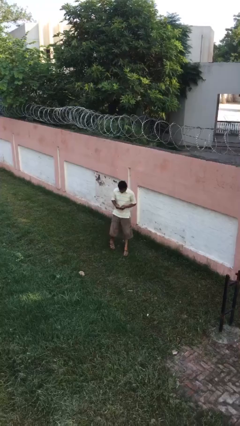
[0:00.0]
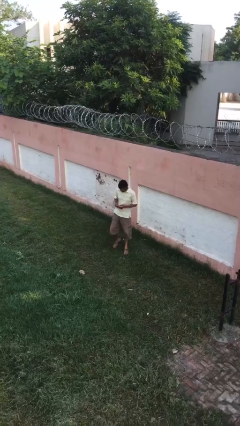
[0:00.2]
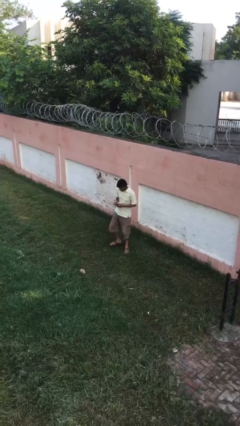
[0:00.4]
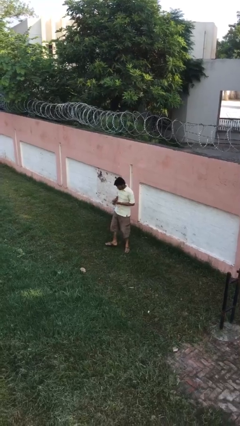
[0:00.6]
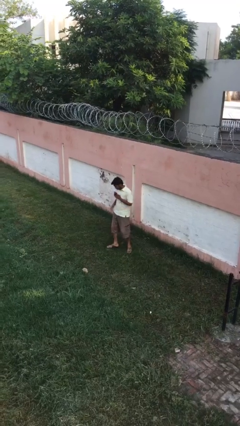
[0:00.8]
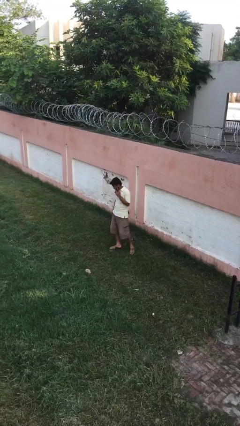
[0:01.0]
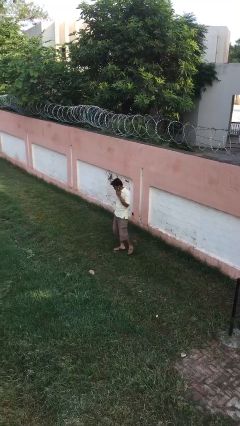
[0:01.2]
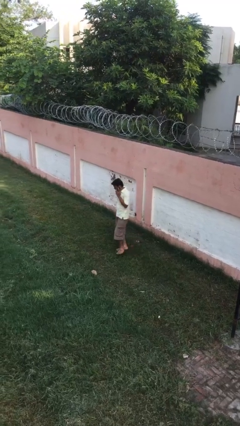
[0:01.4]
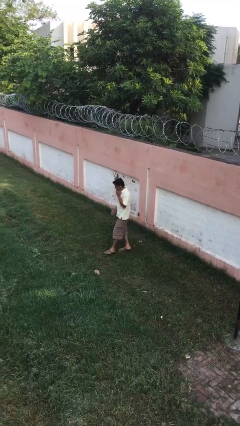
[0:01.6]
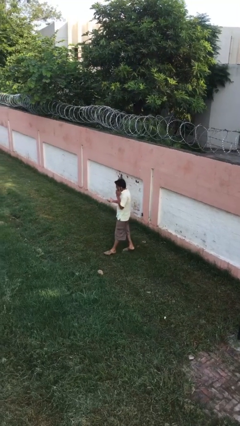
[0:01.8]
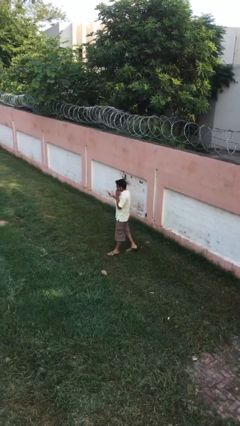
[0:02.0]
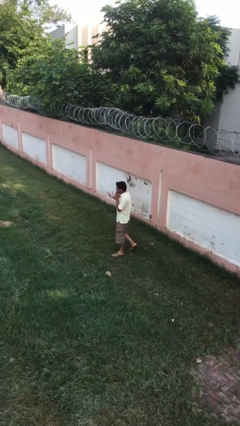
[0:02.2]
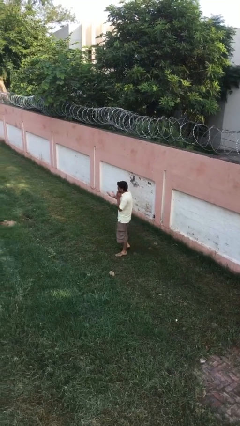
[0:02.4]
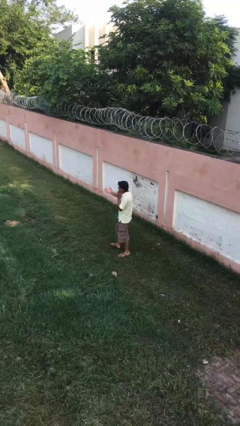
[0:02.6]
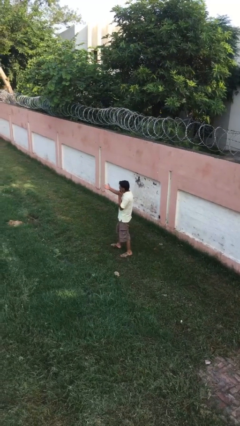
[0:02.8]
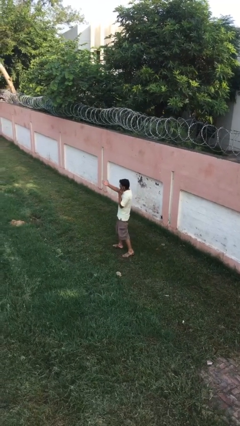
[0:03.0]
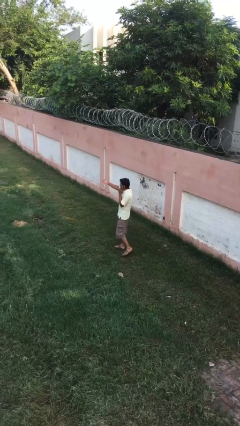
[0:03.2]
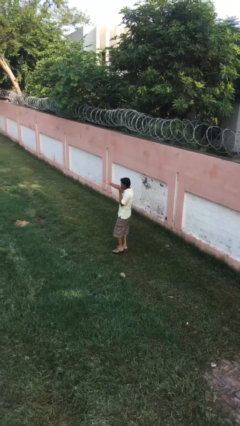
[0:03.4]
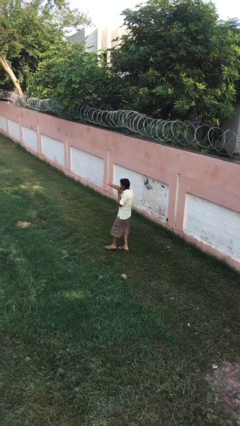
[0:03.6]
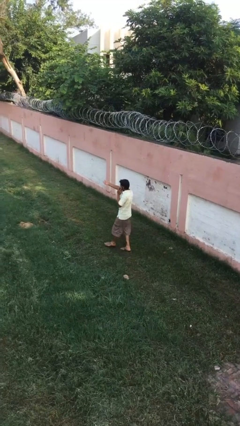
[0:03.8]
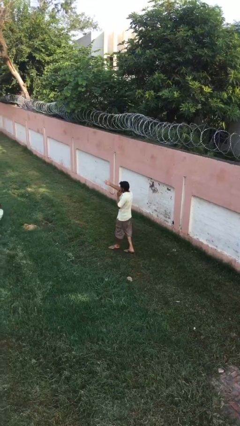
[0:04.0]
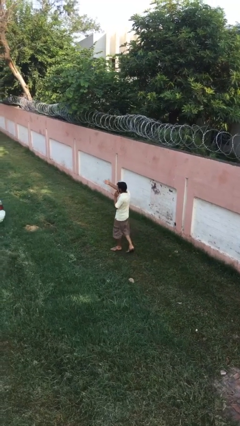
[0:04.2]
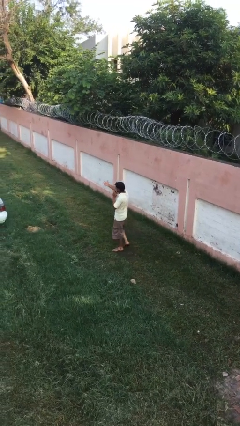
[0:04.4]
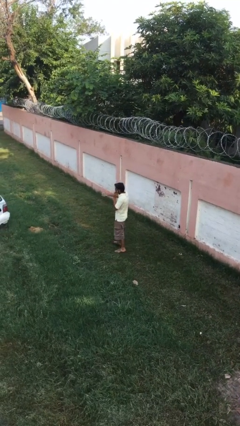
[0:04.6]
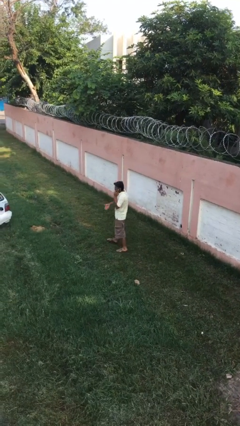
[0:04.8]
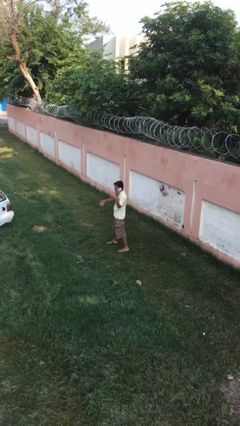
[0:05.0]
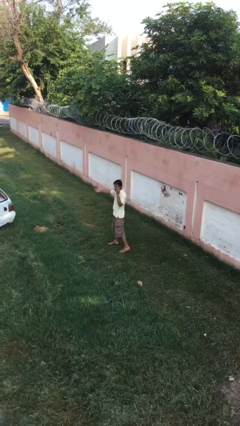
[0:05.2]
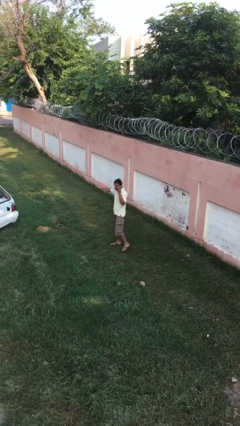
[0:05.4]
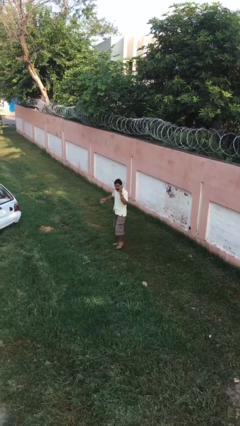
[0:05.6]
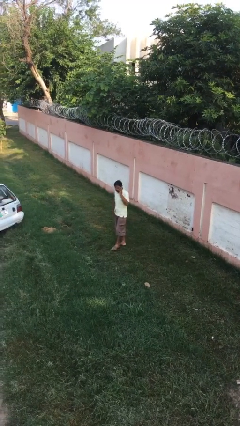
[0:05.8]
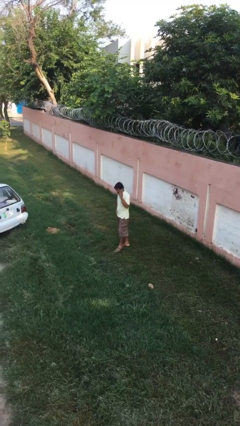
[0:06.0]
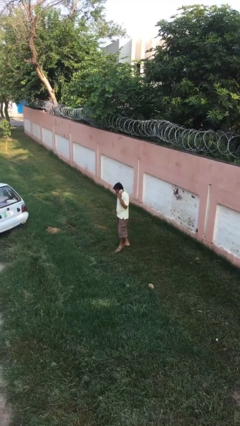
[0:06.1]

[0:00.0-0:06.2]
person talks on phone

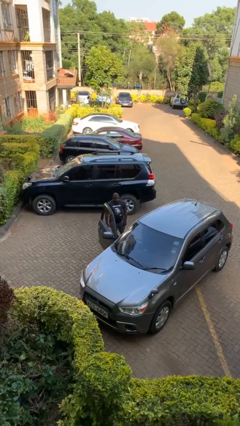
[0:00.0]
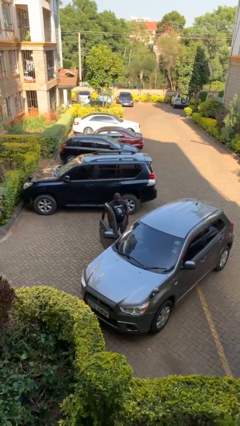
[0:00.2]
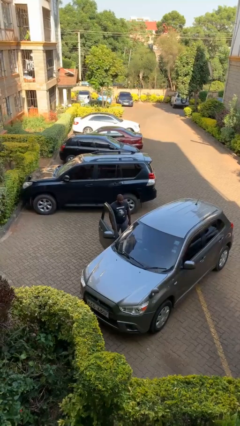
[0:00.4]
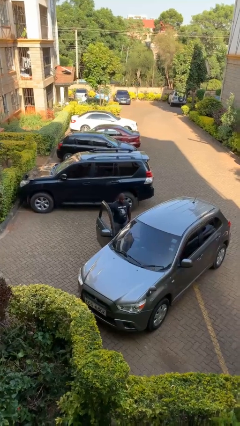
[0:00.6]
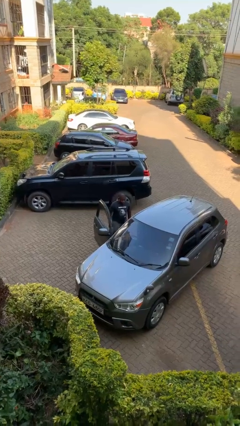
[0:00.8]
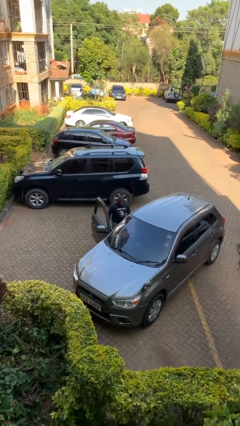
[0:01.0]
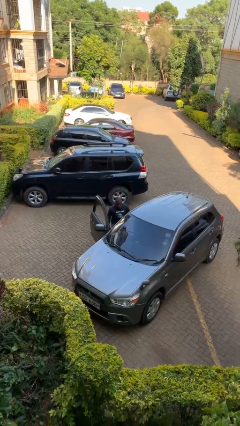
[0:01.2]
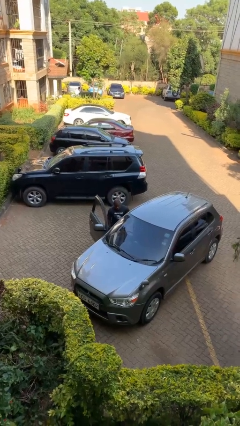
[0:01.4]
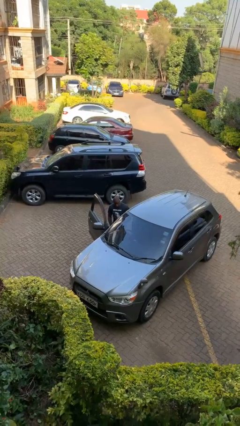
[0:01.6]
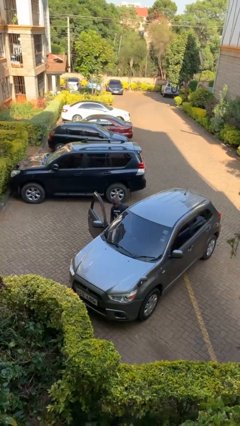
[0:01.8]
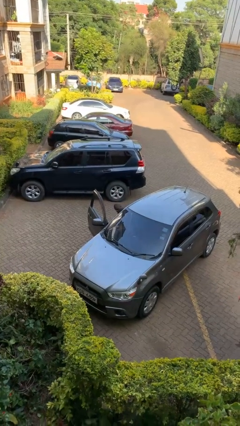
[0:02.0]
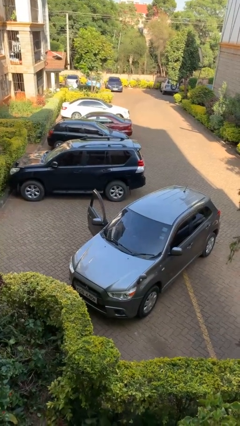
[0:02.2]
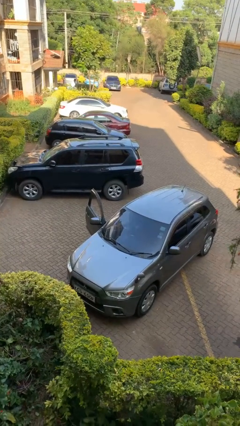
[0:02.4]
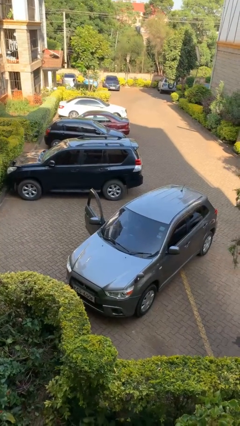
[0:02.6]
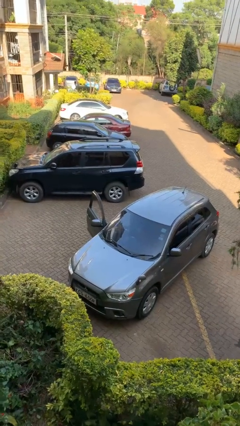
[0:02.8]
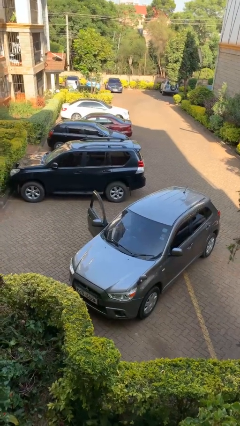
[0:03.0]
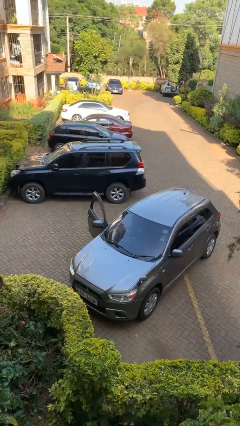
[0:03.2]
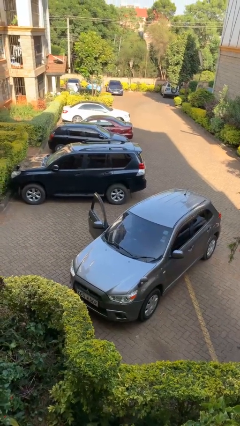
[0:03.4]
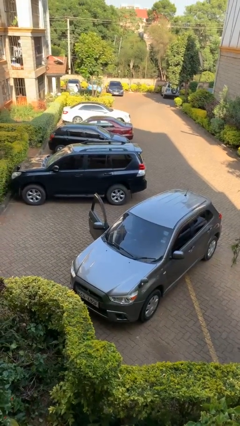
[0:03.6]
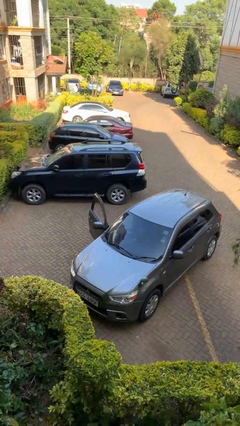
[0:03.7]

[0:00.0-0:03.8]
person enters car

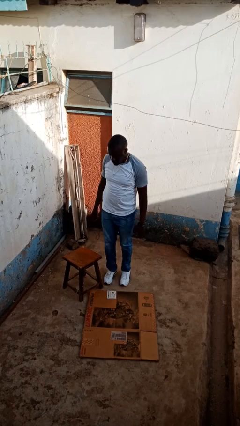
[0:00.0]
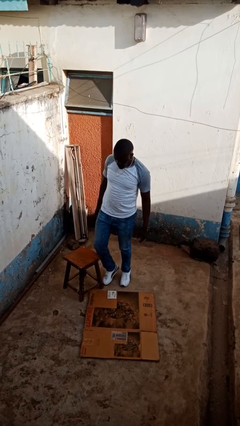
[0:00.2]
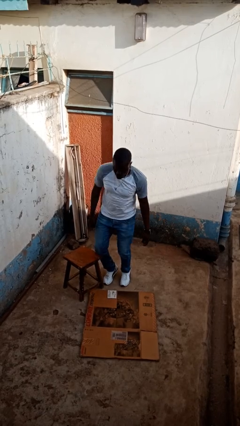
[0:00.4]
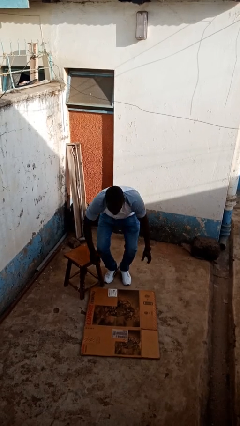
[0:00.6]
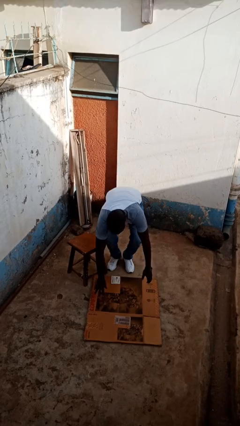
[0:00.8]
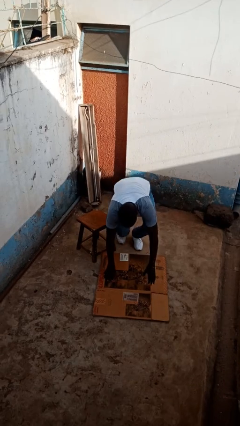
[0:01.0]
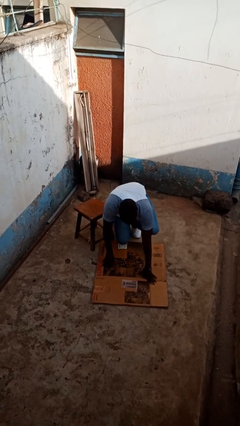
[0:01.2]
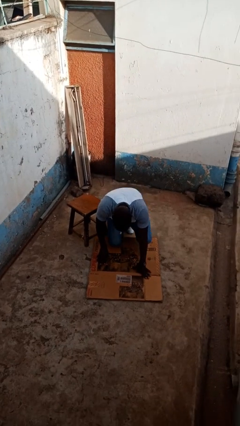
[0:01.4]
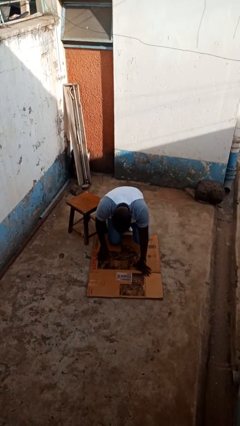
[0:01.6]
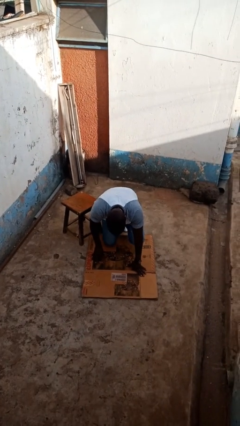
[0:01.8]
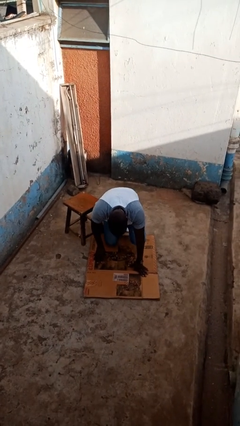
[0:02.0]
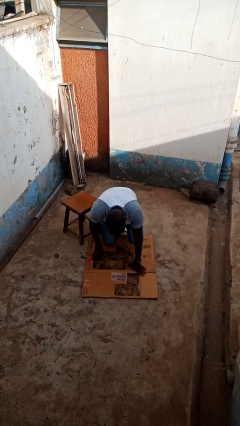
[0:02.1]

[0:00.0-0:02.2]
person trips on object on floor

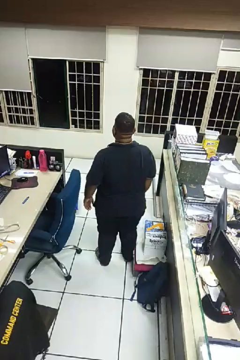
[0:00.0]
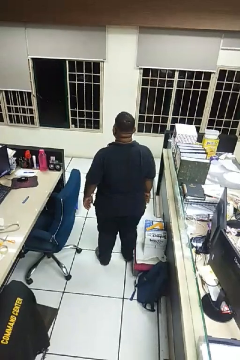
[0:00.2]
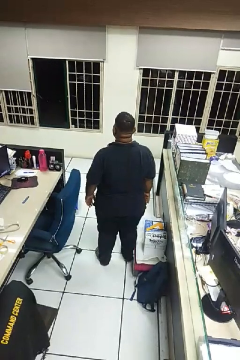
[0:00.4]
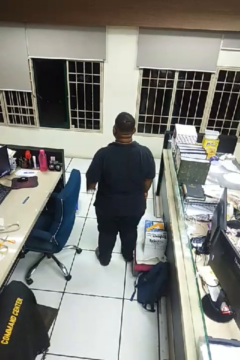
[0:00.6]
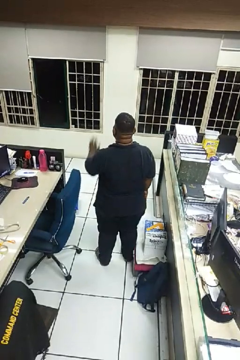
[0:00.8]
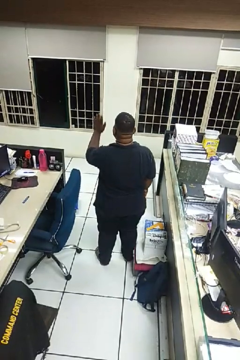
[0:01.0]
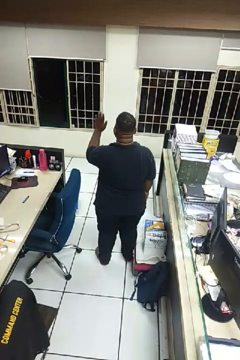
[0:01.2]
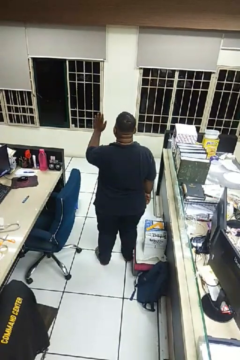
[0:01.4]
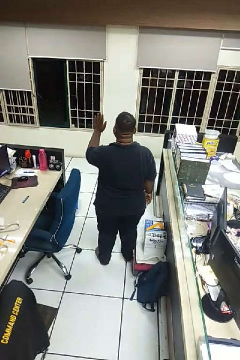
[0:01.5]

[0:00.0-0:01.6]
person gestures stop

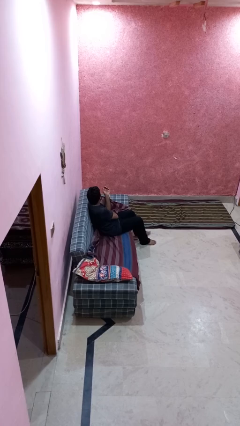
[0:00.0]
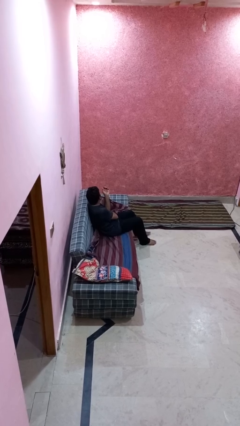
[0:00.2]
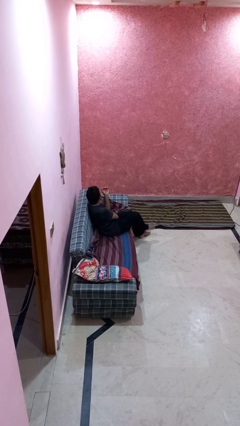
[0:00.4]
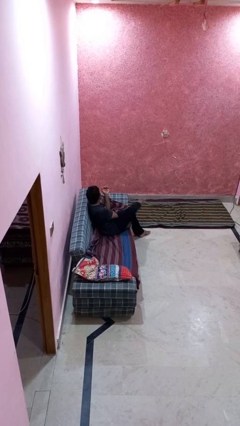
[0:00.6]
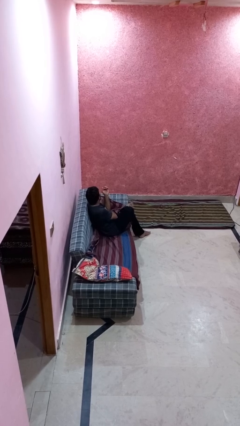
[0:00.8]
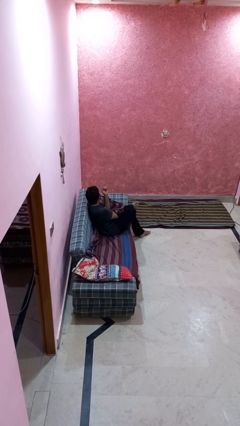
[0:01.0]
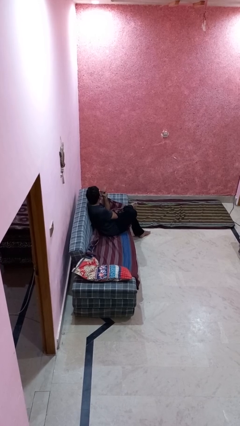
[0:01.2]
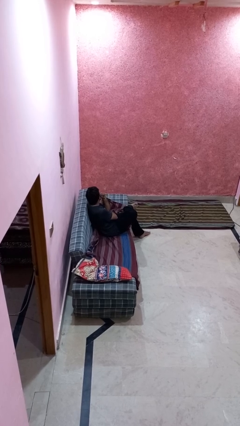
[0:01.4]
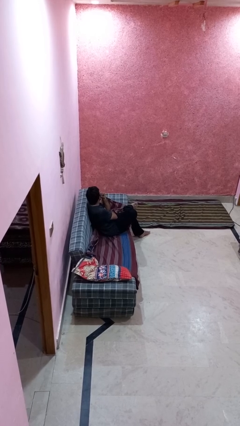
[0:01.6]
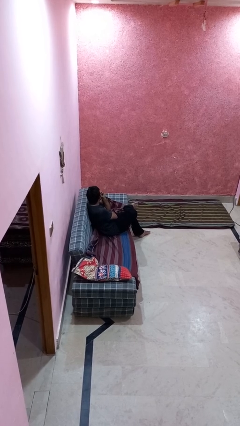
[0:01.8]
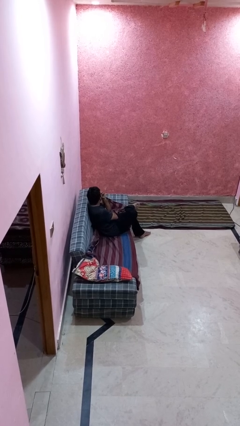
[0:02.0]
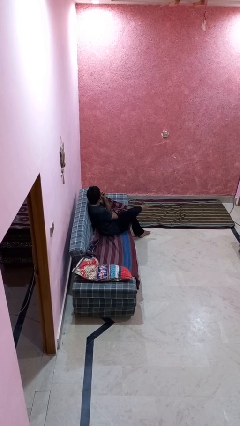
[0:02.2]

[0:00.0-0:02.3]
person crosses legs

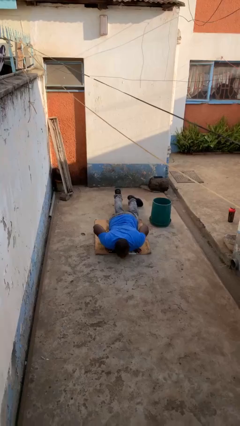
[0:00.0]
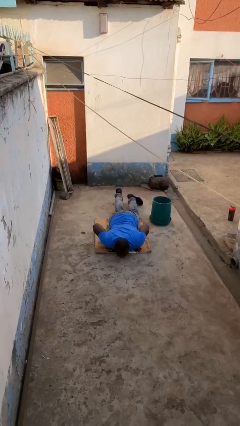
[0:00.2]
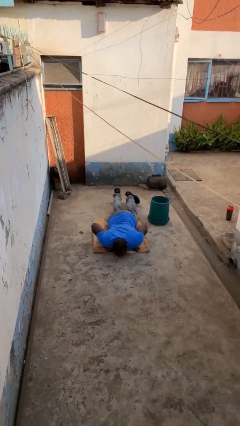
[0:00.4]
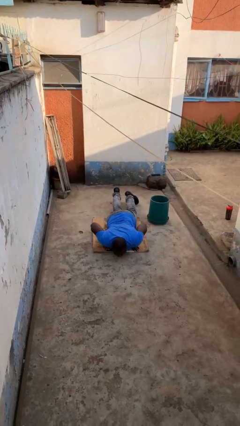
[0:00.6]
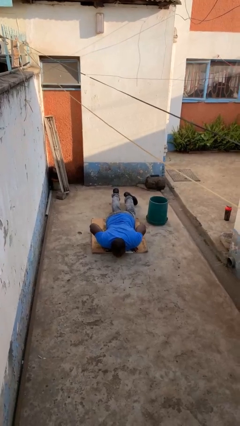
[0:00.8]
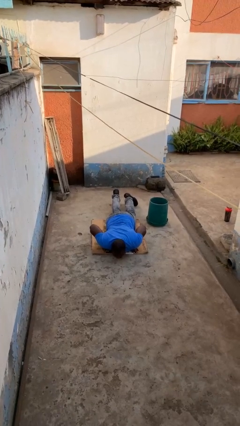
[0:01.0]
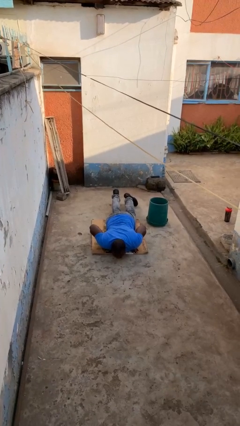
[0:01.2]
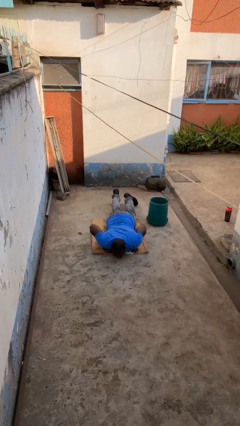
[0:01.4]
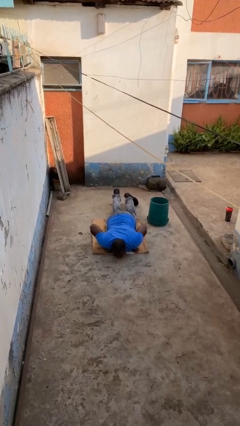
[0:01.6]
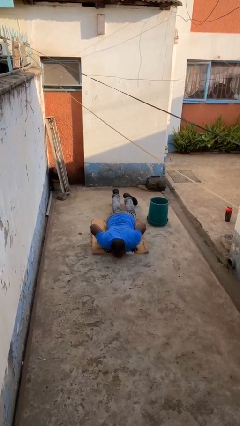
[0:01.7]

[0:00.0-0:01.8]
person lies down on floor
